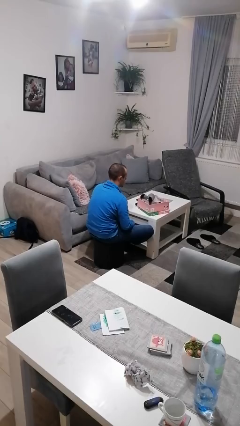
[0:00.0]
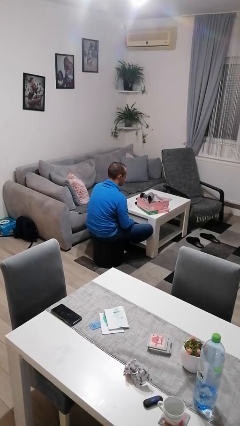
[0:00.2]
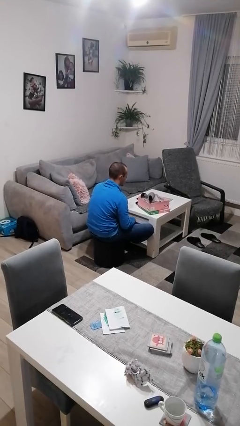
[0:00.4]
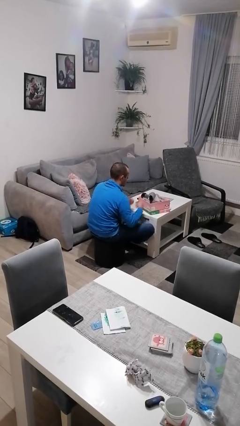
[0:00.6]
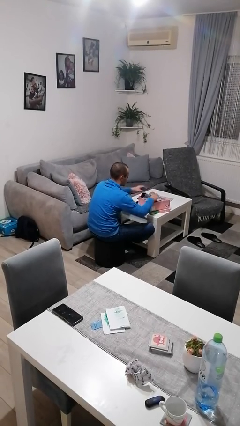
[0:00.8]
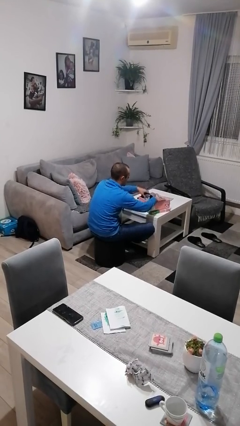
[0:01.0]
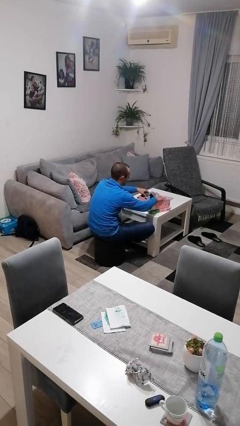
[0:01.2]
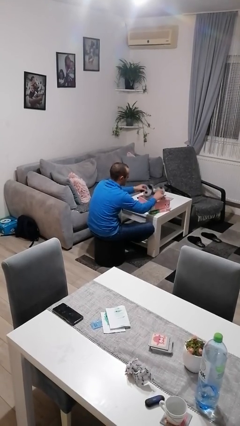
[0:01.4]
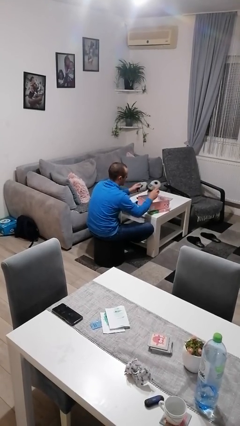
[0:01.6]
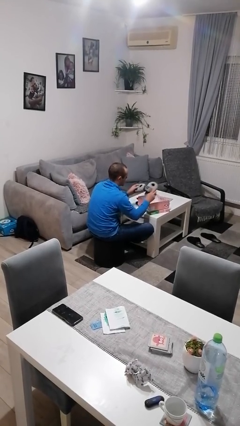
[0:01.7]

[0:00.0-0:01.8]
person takes object from box

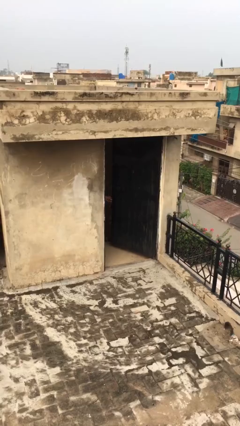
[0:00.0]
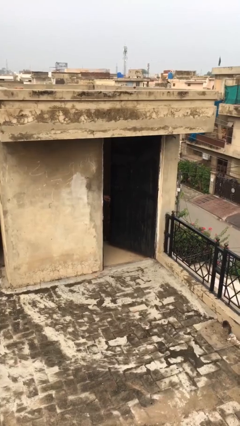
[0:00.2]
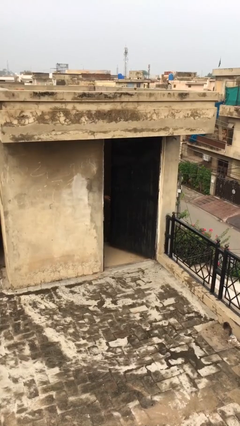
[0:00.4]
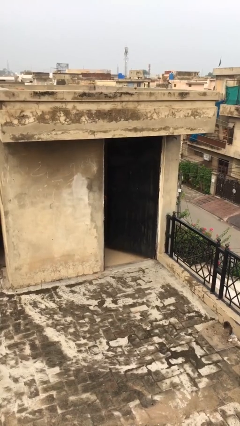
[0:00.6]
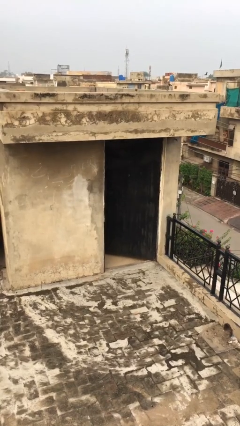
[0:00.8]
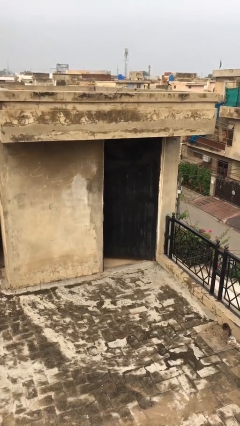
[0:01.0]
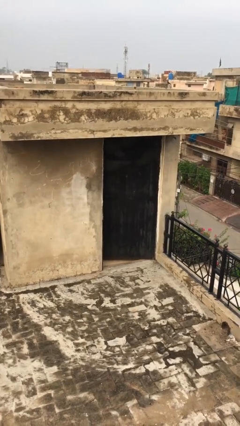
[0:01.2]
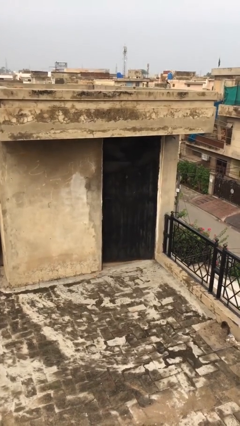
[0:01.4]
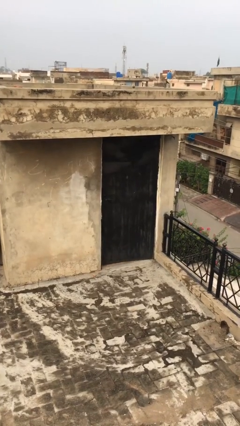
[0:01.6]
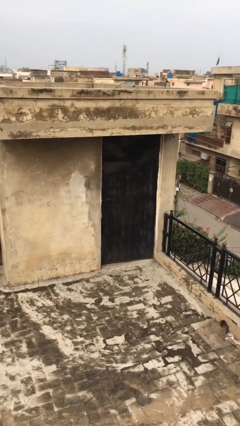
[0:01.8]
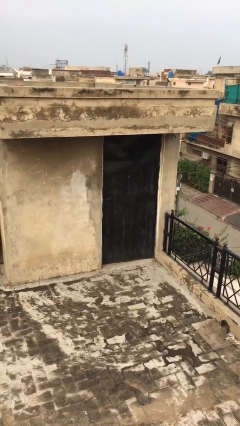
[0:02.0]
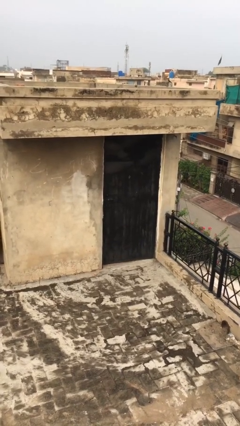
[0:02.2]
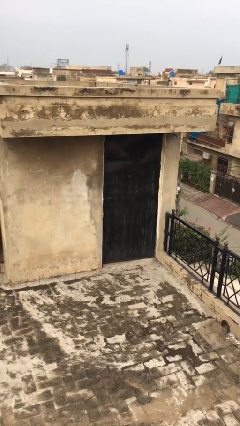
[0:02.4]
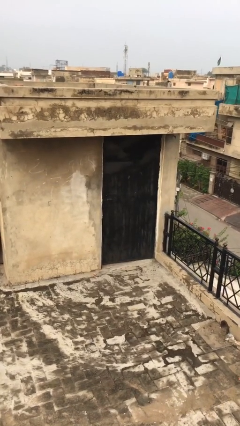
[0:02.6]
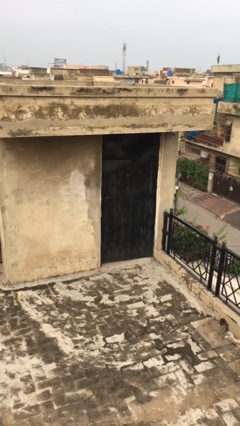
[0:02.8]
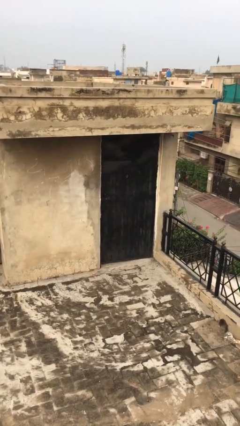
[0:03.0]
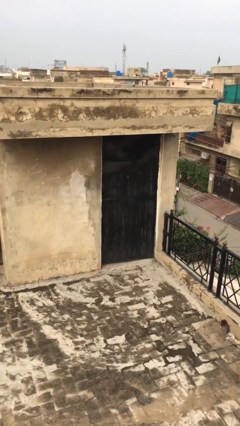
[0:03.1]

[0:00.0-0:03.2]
person closes facility door

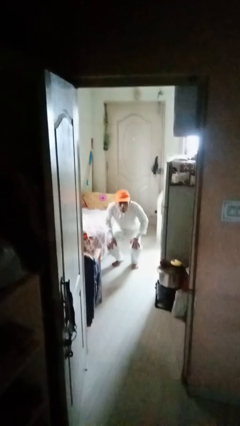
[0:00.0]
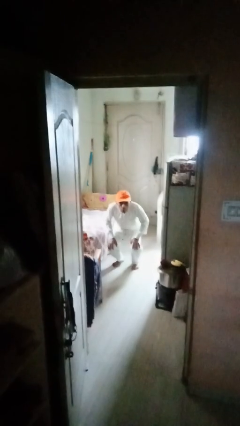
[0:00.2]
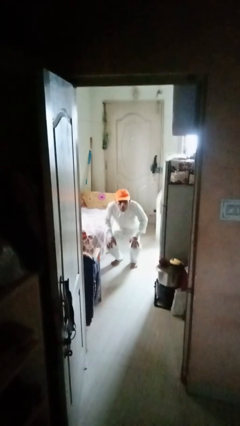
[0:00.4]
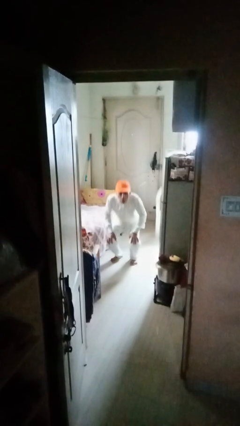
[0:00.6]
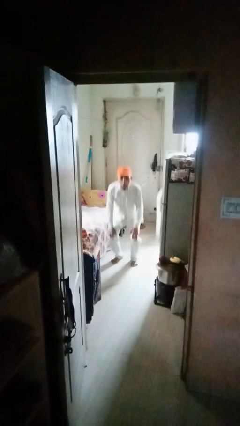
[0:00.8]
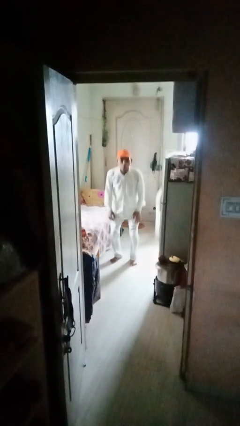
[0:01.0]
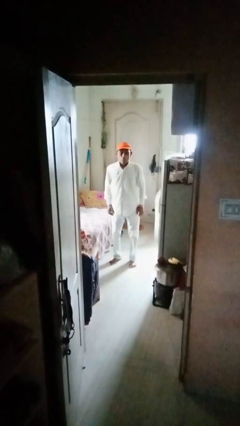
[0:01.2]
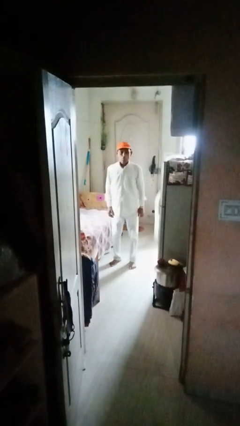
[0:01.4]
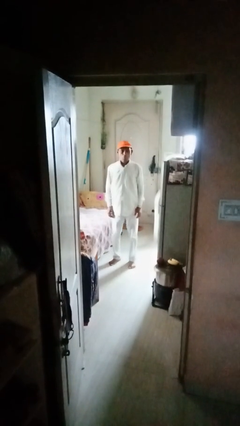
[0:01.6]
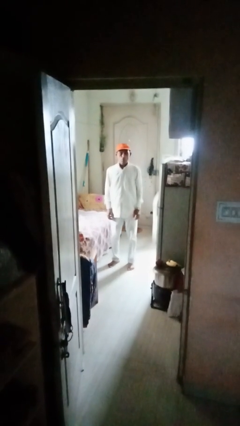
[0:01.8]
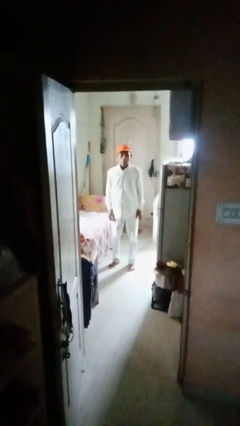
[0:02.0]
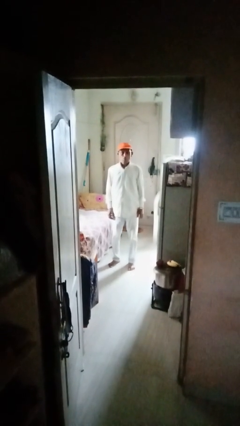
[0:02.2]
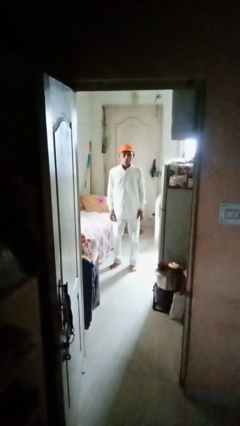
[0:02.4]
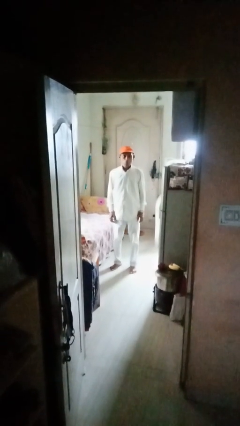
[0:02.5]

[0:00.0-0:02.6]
person stands up

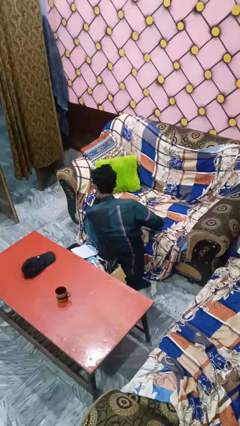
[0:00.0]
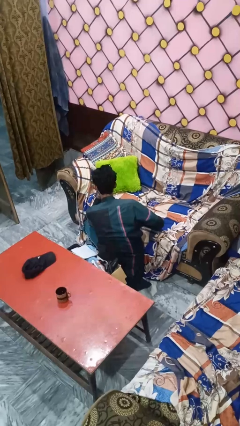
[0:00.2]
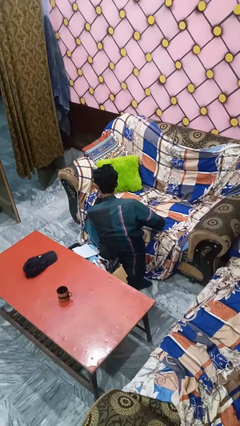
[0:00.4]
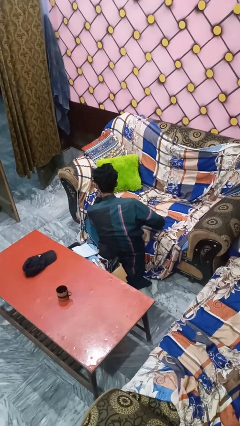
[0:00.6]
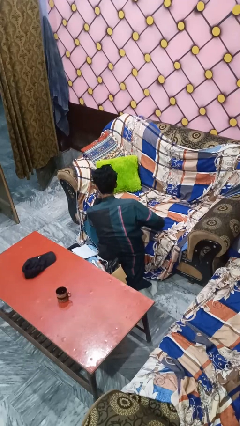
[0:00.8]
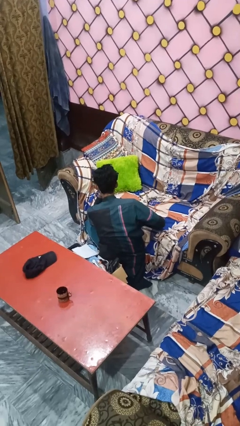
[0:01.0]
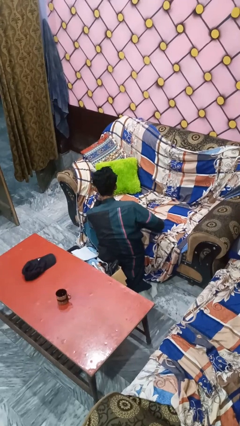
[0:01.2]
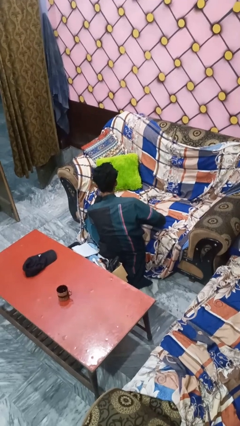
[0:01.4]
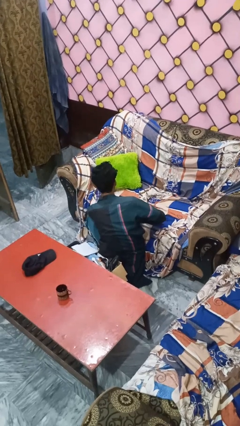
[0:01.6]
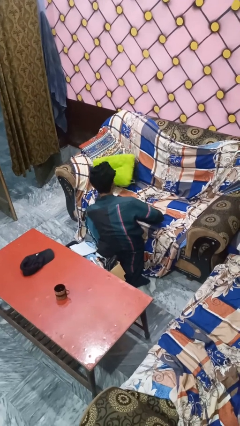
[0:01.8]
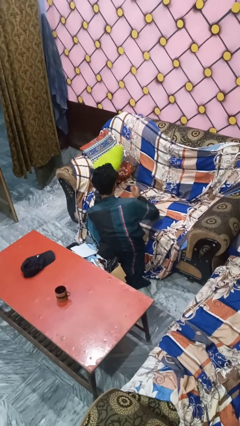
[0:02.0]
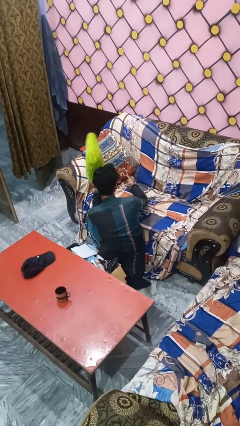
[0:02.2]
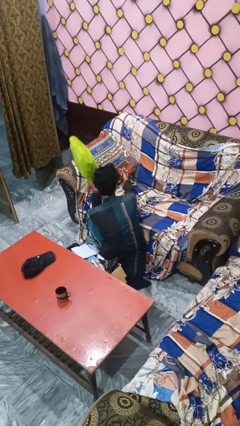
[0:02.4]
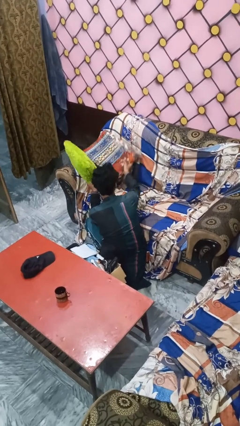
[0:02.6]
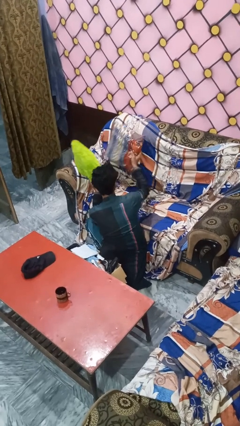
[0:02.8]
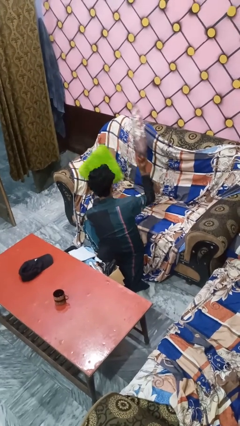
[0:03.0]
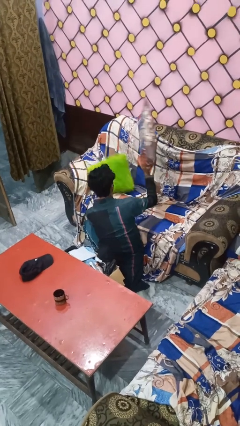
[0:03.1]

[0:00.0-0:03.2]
person searches in couch

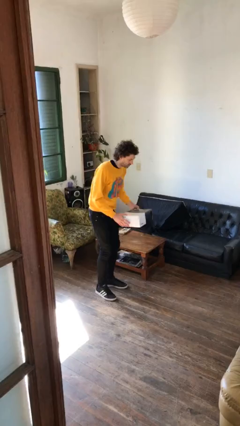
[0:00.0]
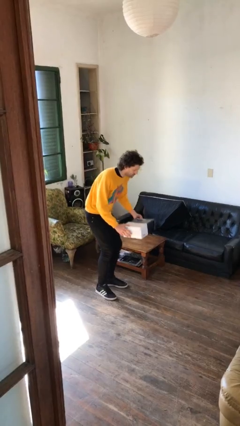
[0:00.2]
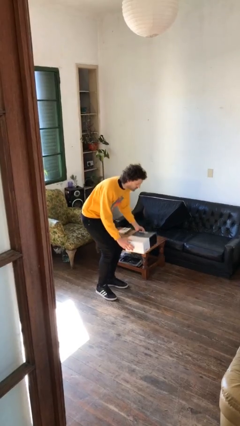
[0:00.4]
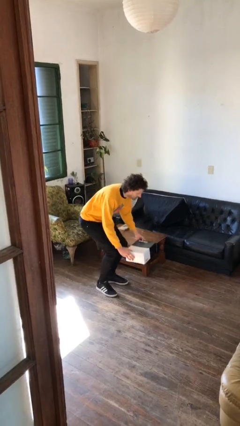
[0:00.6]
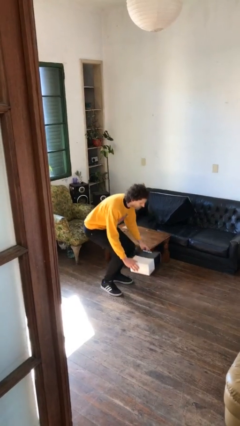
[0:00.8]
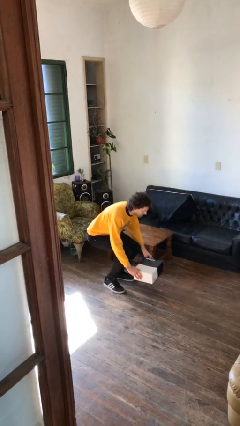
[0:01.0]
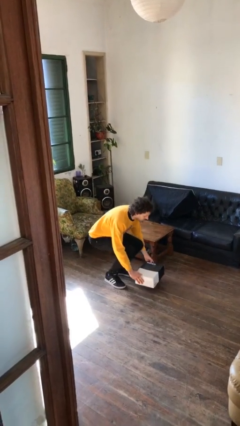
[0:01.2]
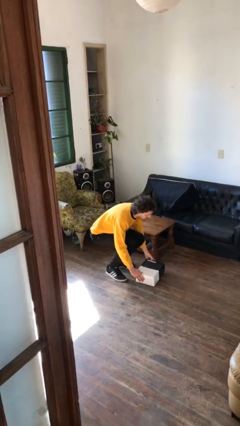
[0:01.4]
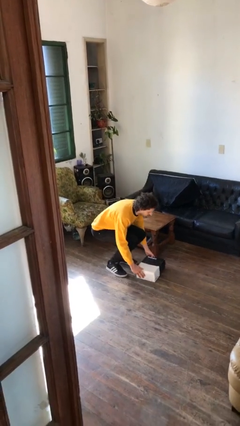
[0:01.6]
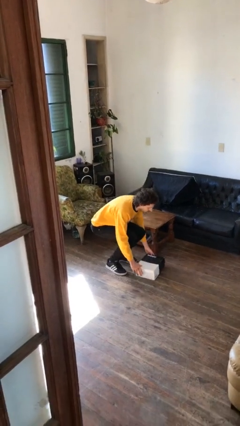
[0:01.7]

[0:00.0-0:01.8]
person puts down object on floor

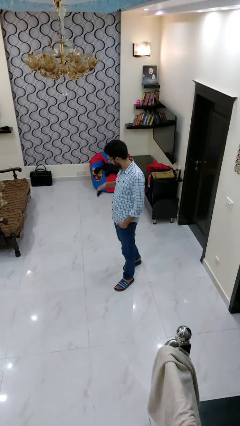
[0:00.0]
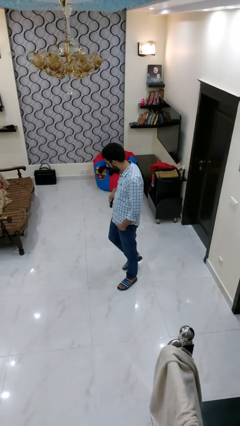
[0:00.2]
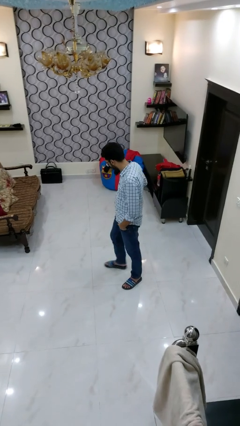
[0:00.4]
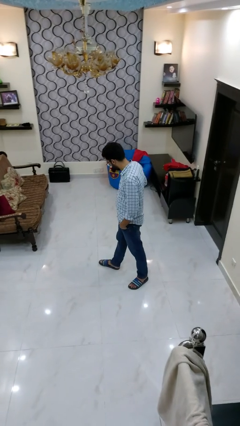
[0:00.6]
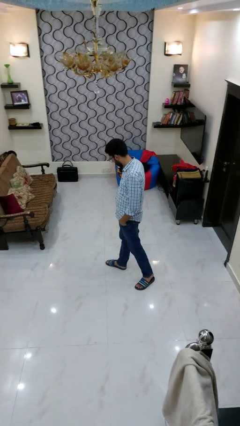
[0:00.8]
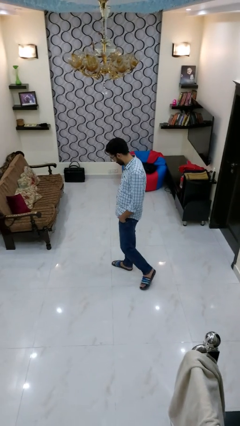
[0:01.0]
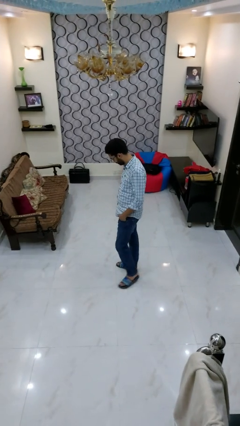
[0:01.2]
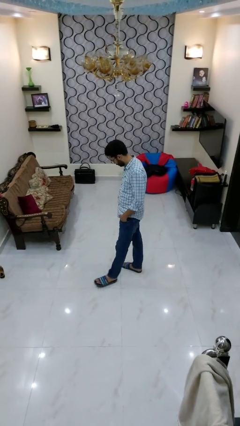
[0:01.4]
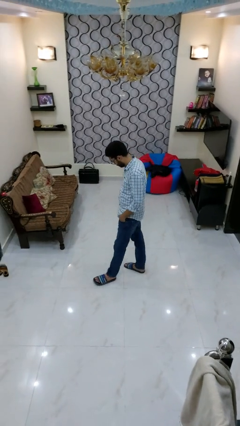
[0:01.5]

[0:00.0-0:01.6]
person puts phone into pocket

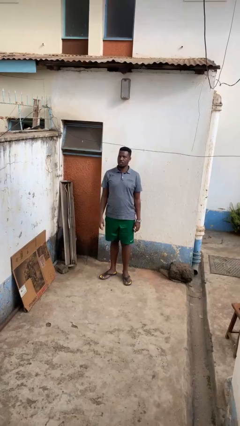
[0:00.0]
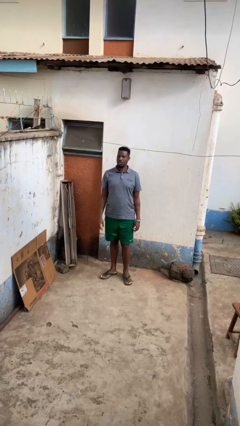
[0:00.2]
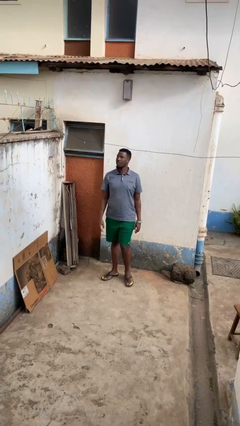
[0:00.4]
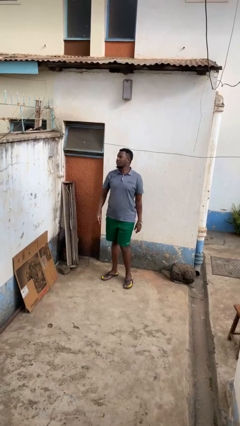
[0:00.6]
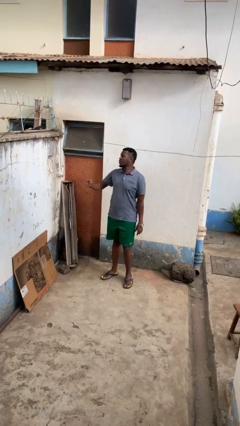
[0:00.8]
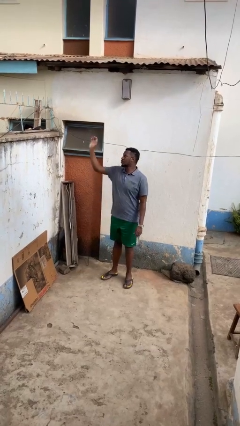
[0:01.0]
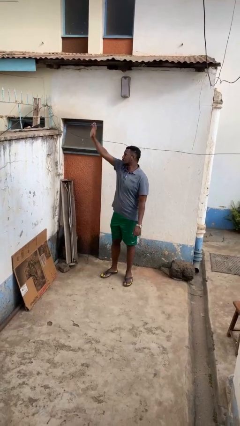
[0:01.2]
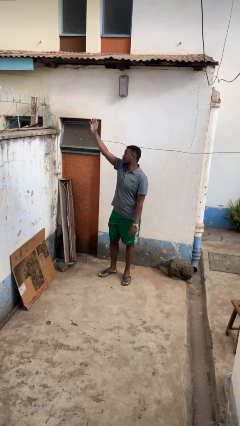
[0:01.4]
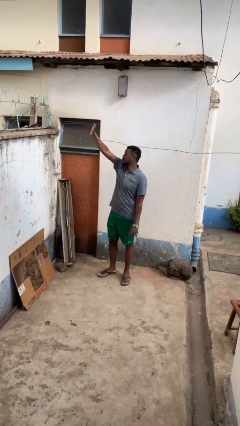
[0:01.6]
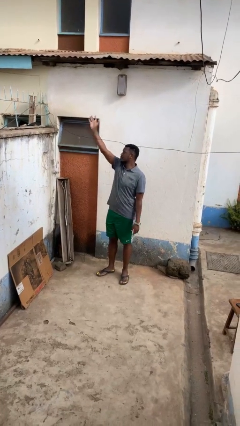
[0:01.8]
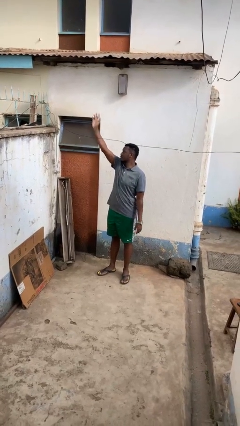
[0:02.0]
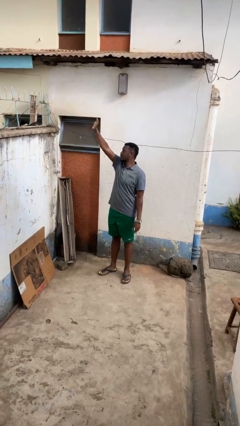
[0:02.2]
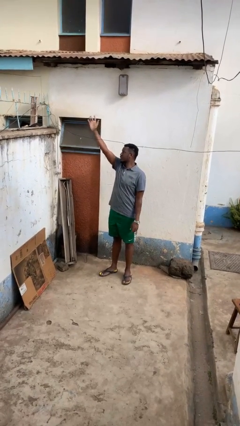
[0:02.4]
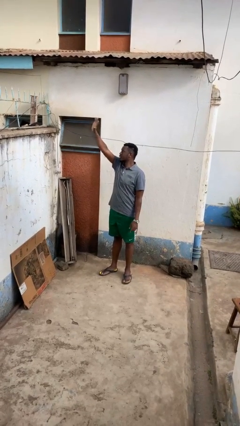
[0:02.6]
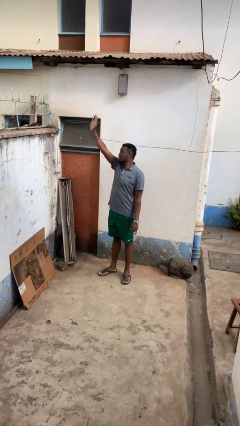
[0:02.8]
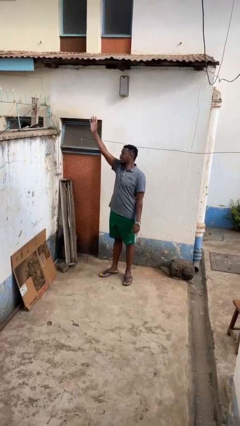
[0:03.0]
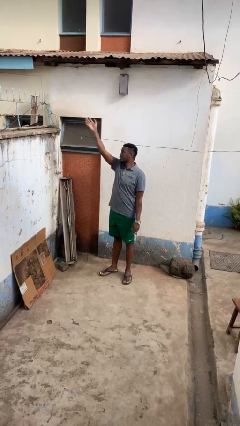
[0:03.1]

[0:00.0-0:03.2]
person waves at person

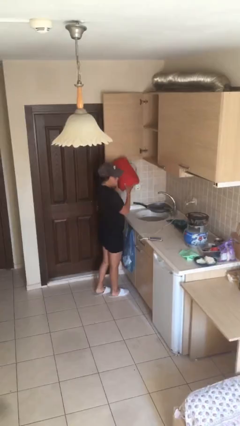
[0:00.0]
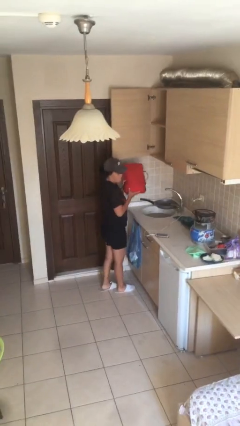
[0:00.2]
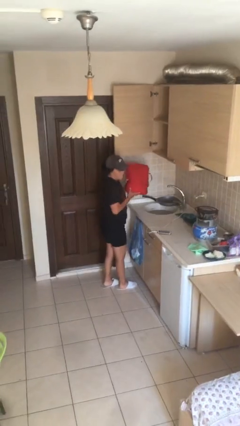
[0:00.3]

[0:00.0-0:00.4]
person picks up object from shelf
